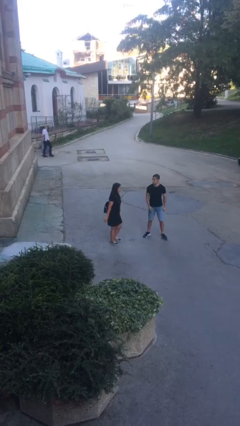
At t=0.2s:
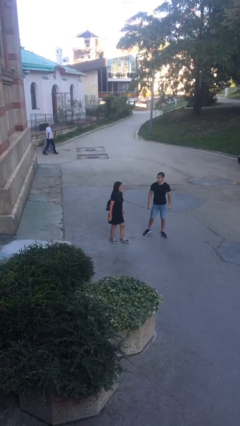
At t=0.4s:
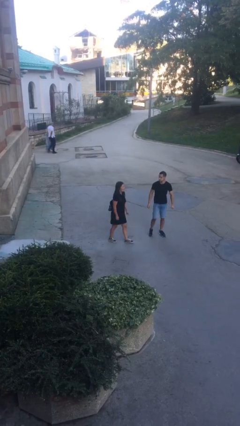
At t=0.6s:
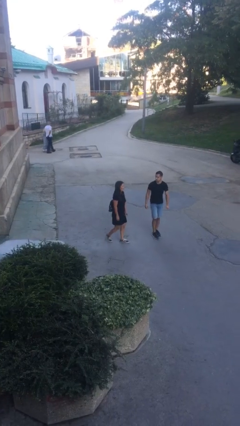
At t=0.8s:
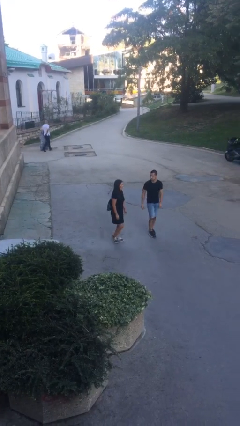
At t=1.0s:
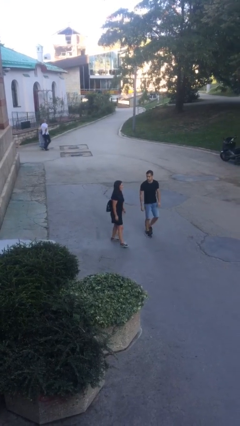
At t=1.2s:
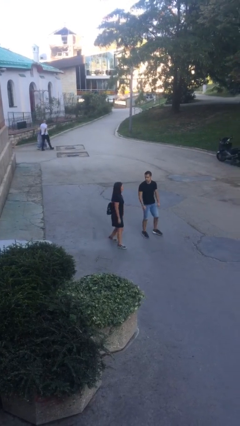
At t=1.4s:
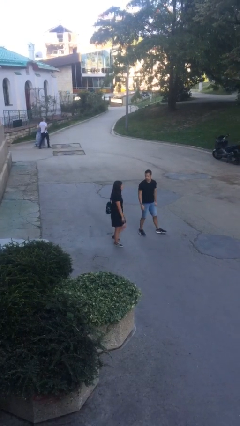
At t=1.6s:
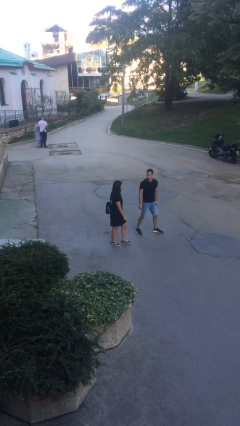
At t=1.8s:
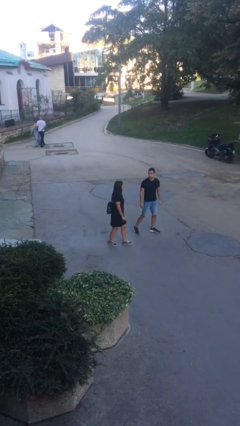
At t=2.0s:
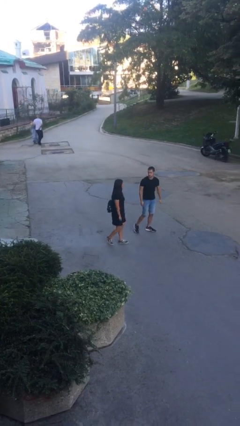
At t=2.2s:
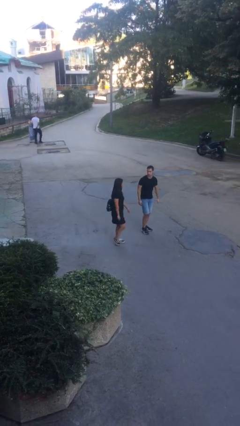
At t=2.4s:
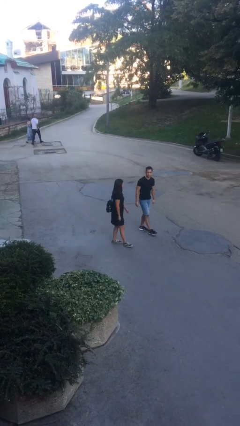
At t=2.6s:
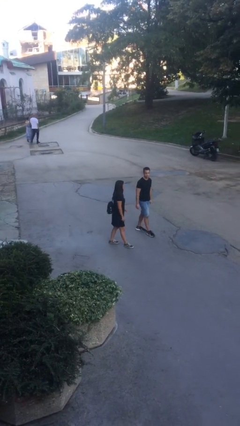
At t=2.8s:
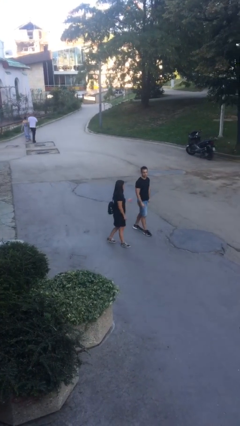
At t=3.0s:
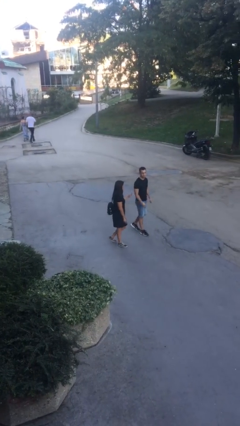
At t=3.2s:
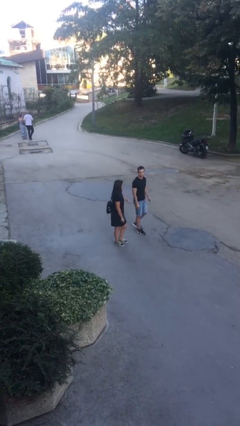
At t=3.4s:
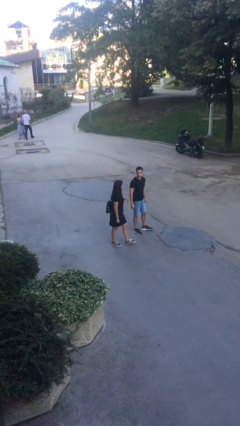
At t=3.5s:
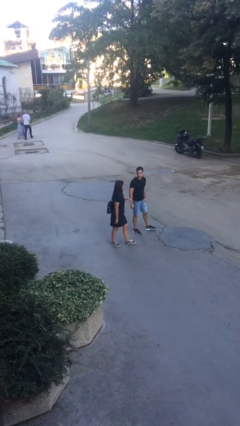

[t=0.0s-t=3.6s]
person talks to person

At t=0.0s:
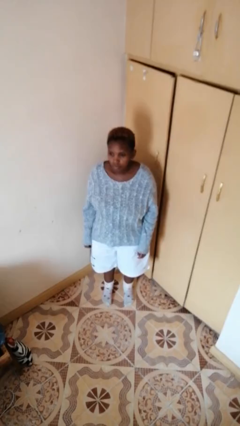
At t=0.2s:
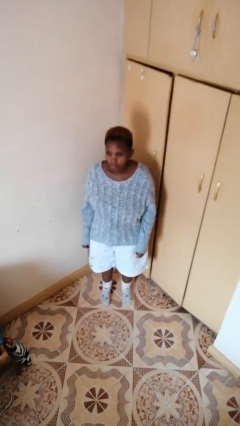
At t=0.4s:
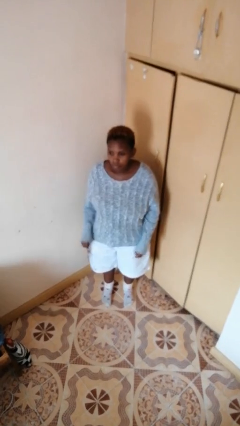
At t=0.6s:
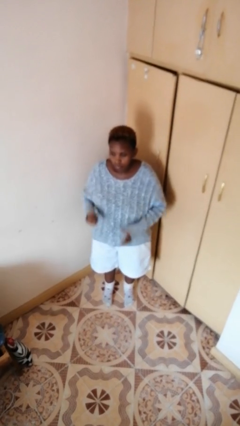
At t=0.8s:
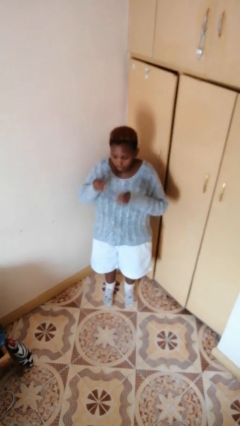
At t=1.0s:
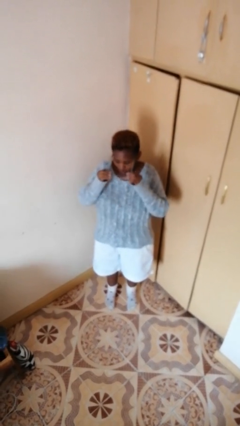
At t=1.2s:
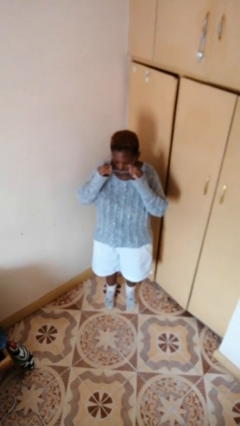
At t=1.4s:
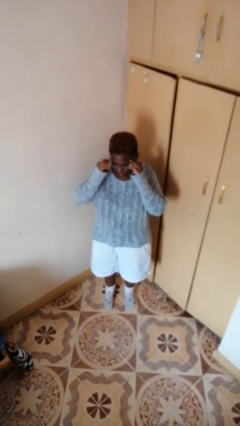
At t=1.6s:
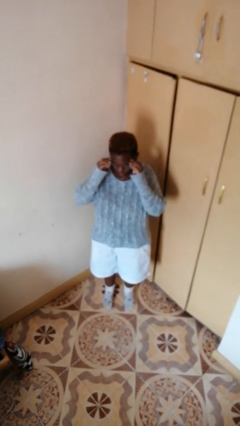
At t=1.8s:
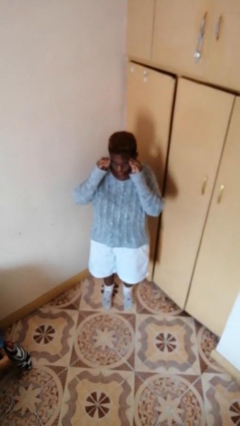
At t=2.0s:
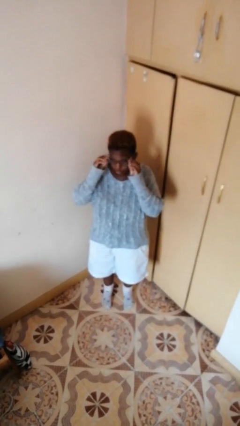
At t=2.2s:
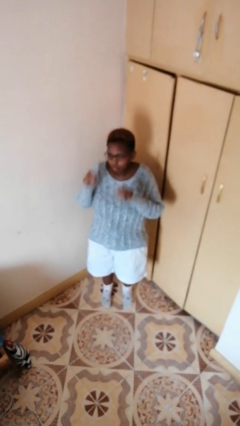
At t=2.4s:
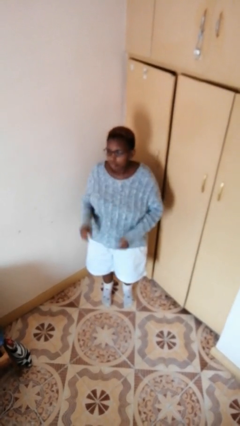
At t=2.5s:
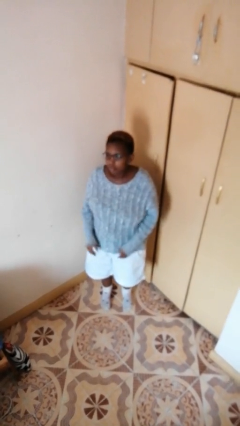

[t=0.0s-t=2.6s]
person puts on glasses

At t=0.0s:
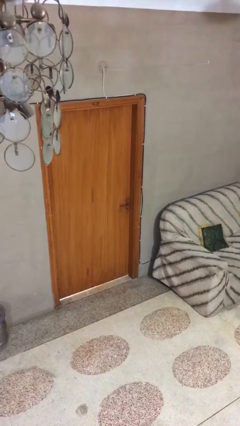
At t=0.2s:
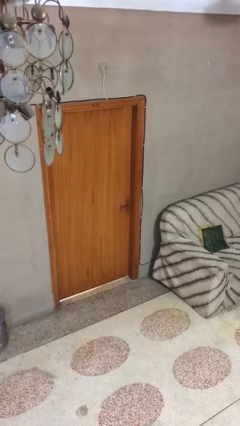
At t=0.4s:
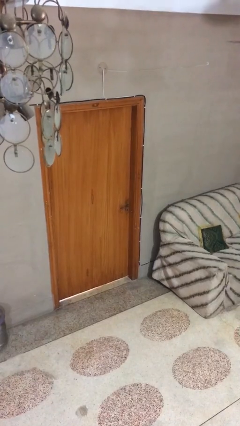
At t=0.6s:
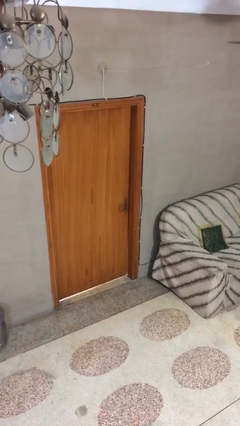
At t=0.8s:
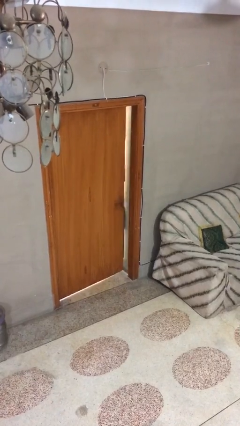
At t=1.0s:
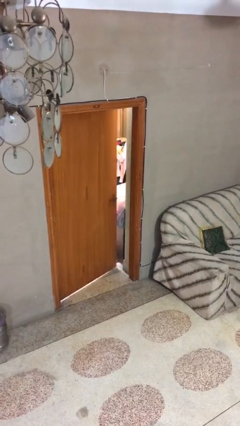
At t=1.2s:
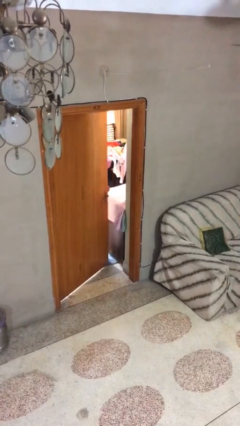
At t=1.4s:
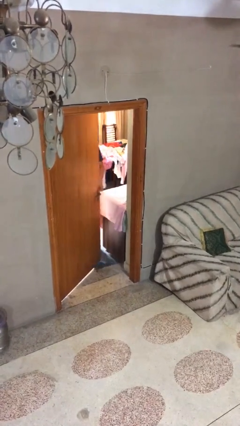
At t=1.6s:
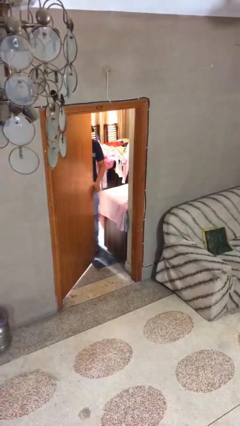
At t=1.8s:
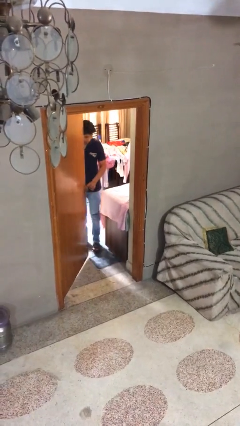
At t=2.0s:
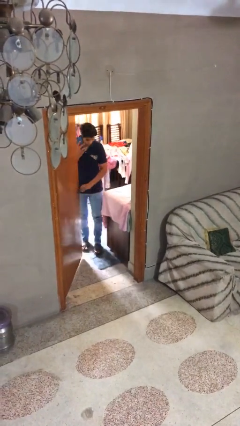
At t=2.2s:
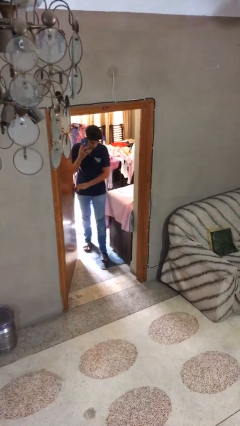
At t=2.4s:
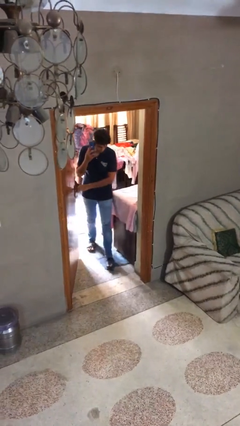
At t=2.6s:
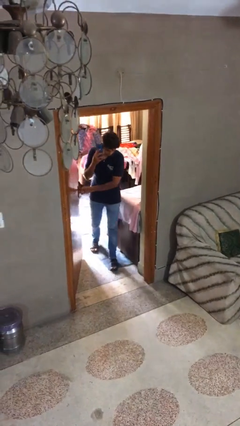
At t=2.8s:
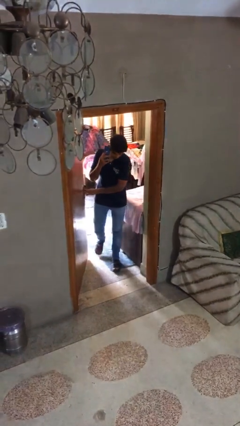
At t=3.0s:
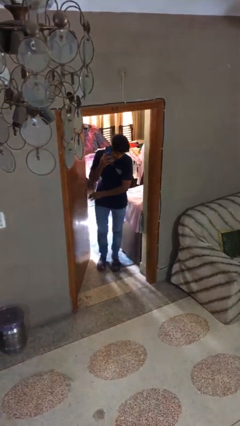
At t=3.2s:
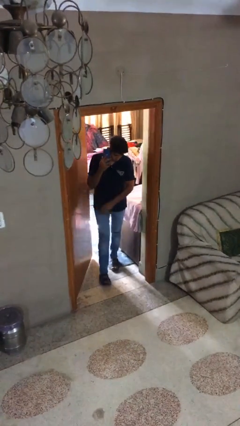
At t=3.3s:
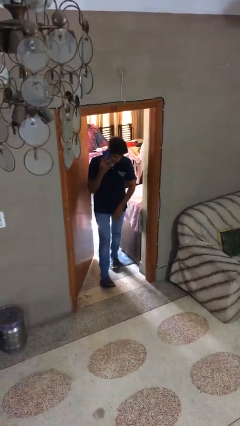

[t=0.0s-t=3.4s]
person opens facility door

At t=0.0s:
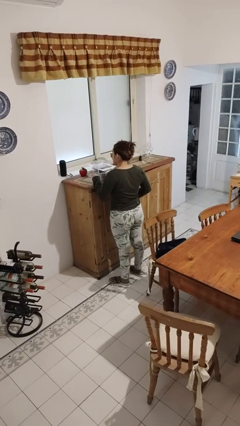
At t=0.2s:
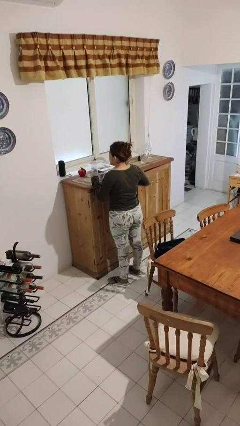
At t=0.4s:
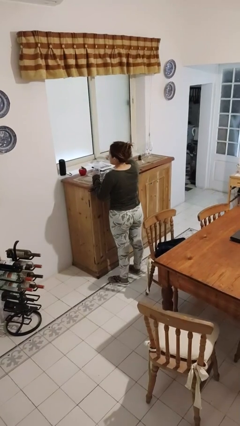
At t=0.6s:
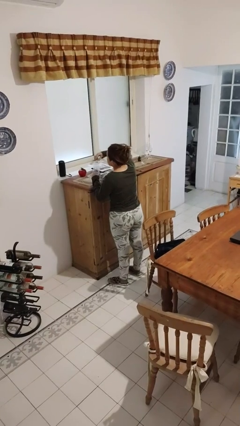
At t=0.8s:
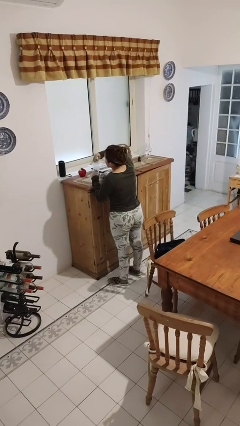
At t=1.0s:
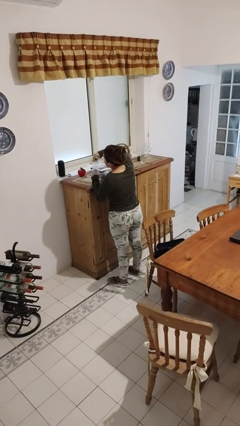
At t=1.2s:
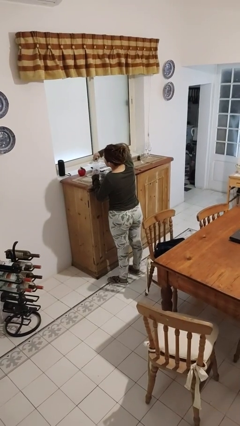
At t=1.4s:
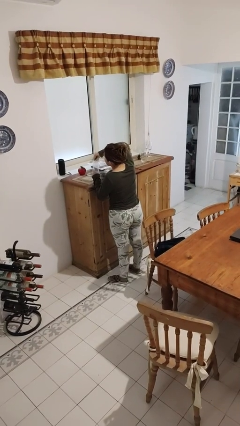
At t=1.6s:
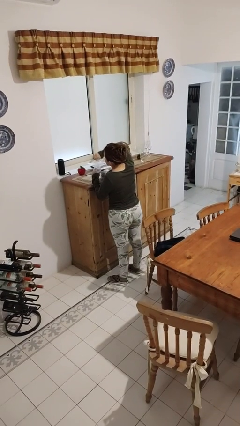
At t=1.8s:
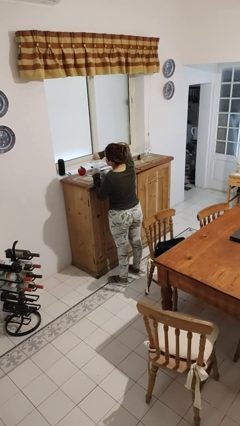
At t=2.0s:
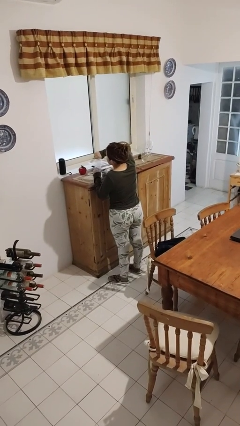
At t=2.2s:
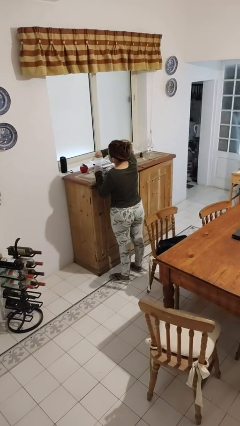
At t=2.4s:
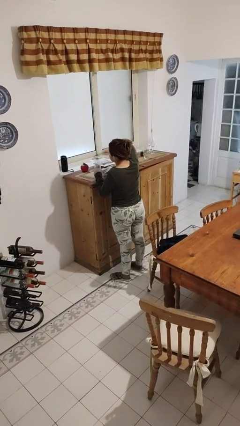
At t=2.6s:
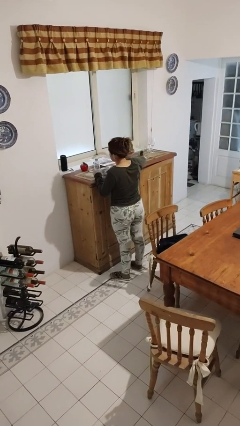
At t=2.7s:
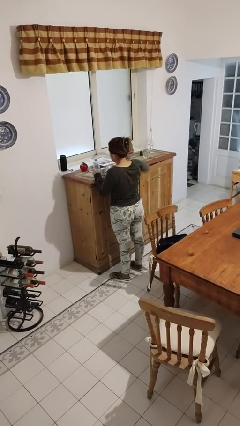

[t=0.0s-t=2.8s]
person screws lid to bottle

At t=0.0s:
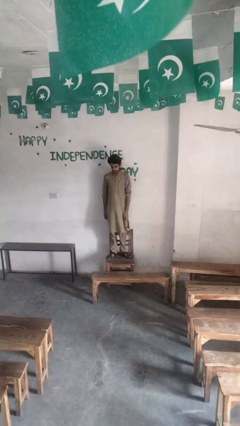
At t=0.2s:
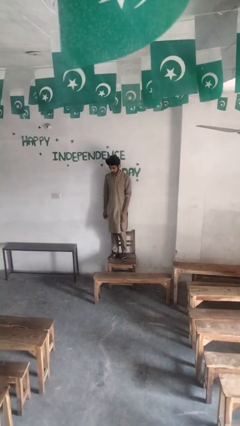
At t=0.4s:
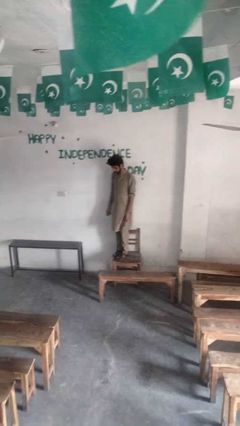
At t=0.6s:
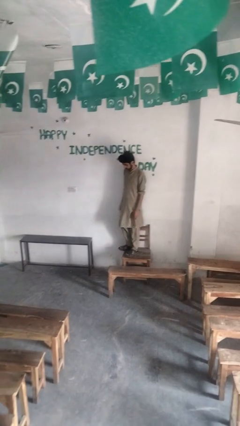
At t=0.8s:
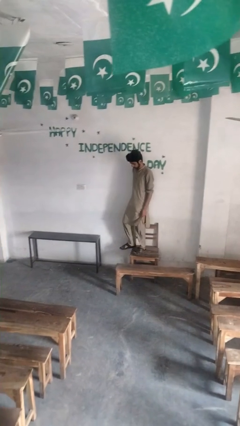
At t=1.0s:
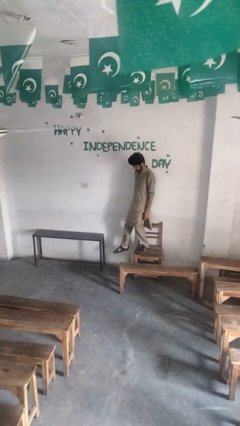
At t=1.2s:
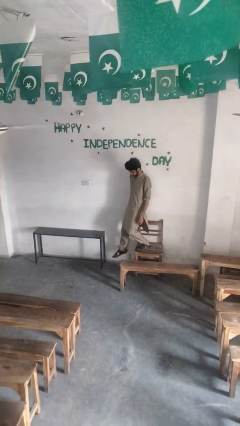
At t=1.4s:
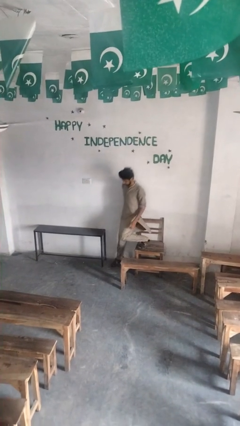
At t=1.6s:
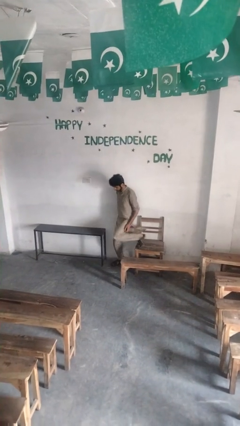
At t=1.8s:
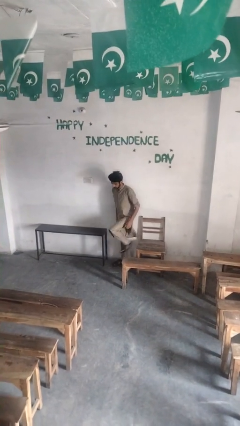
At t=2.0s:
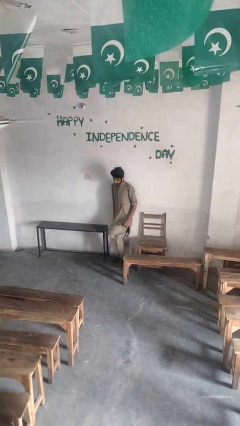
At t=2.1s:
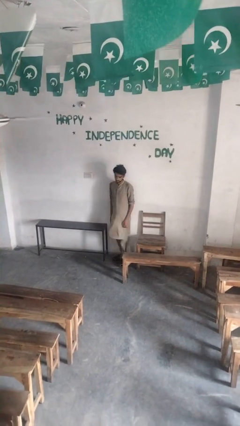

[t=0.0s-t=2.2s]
person climbs off chair

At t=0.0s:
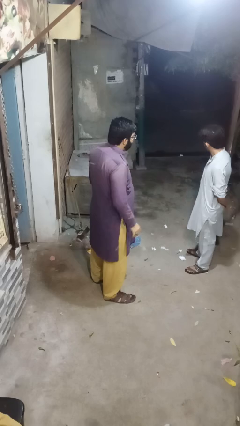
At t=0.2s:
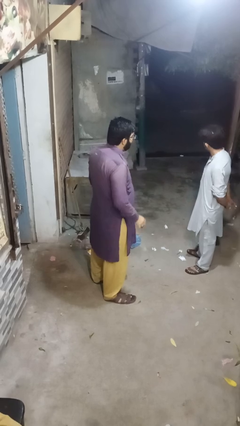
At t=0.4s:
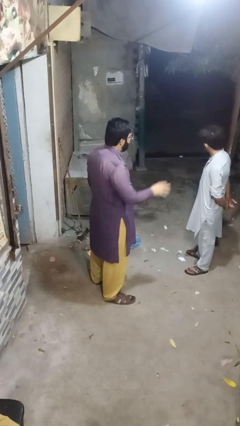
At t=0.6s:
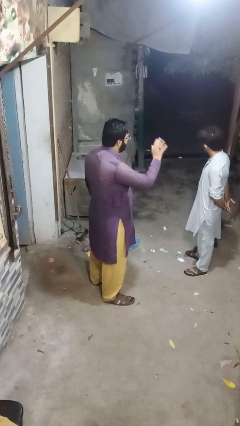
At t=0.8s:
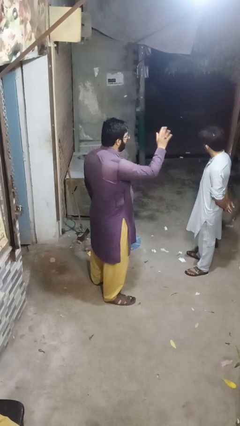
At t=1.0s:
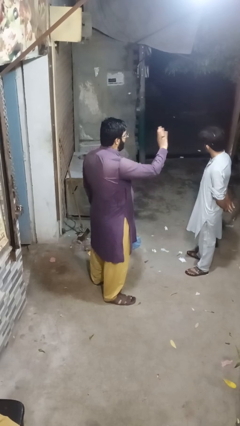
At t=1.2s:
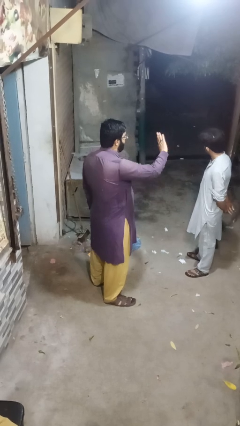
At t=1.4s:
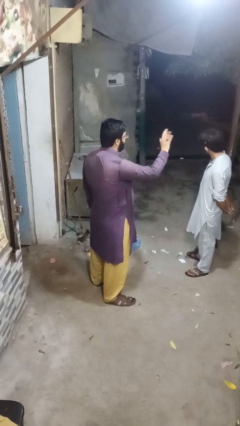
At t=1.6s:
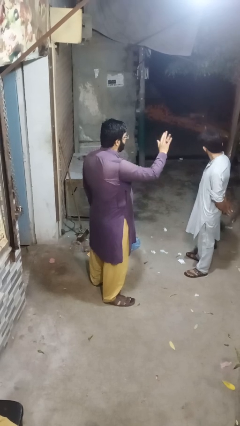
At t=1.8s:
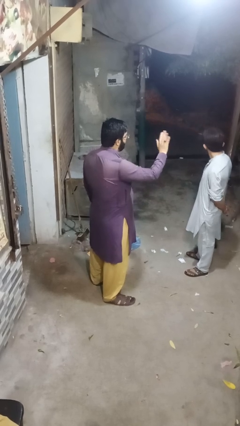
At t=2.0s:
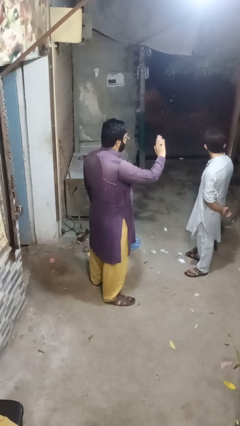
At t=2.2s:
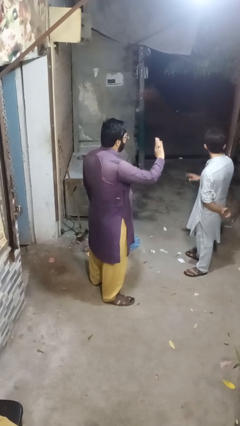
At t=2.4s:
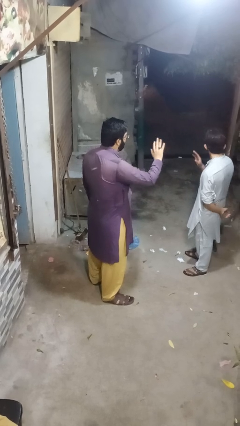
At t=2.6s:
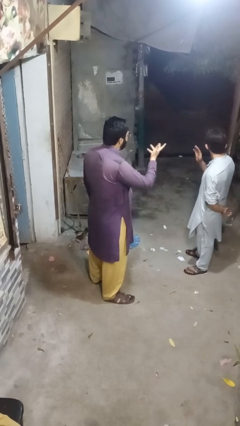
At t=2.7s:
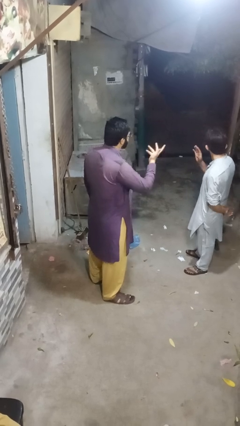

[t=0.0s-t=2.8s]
person waves at person

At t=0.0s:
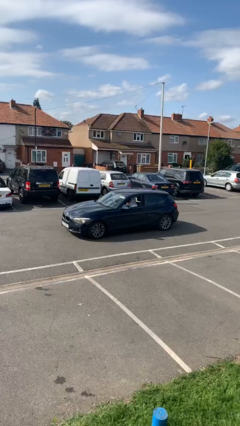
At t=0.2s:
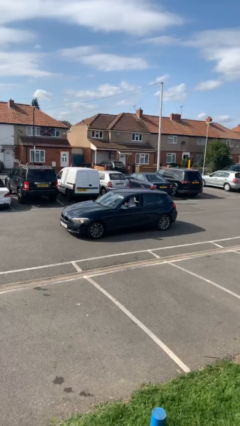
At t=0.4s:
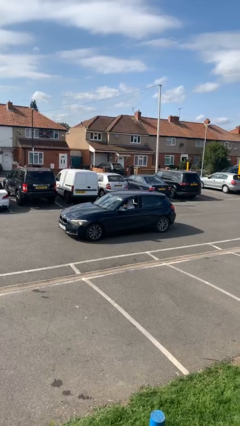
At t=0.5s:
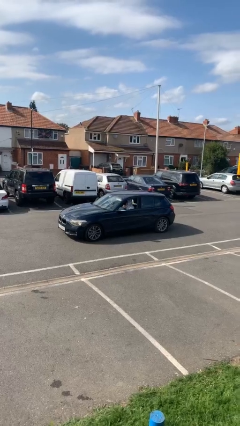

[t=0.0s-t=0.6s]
car drops off person
